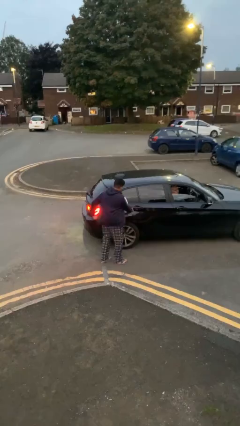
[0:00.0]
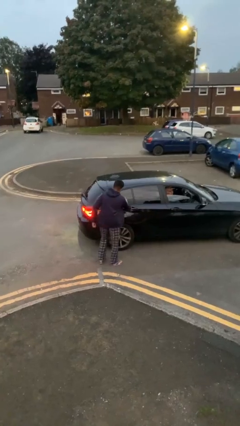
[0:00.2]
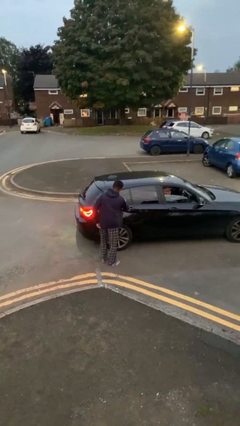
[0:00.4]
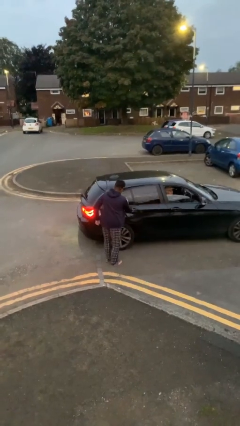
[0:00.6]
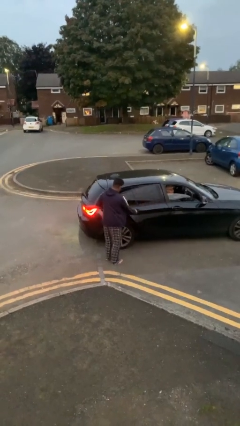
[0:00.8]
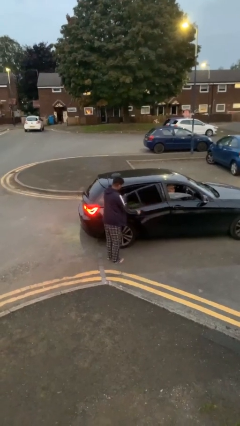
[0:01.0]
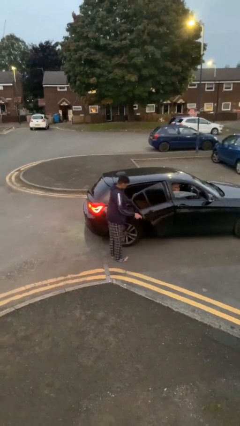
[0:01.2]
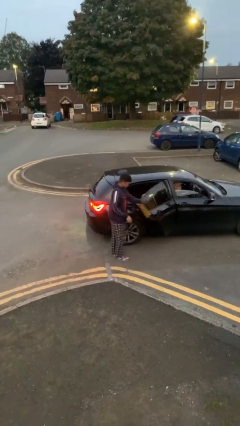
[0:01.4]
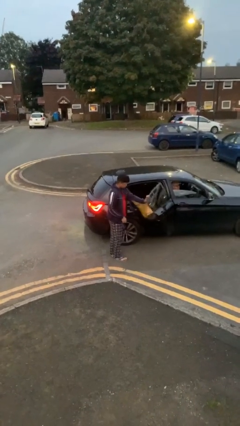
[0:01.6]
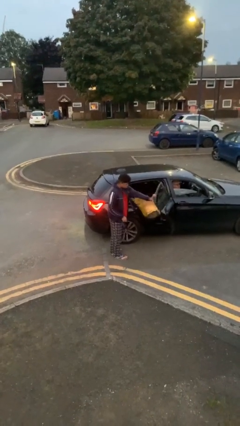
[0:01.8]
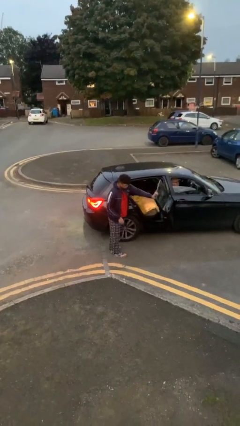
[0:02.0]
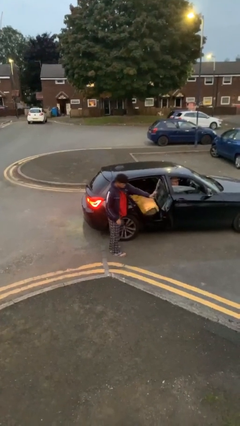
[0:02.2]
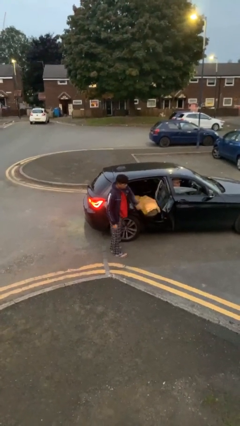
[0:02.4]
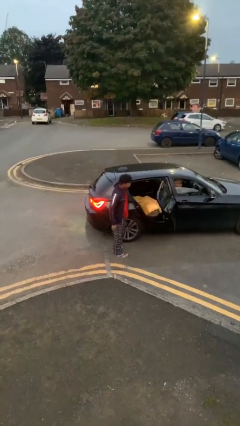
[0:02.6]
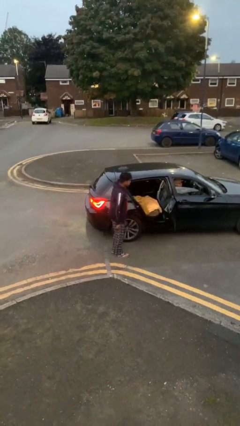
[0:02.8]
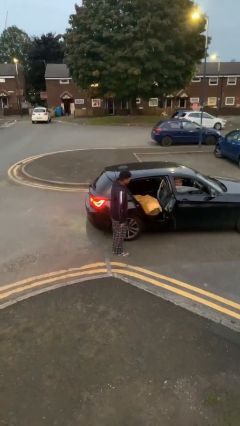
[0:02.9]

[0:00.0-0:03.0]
person opens car door

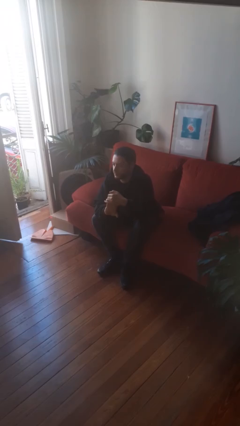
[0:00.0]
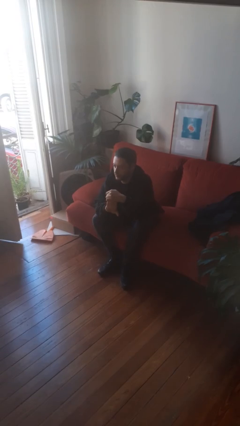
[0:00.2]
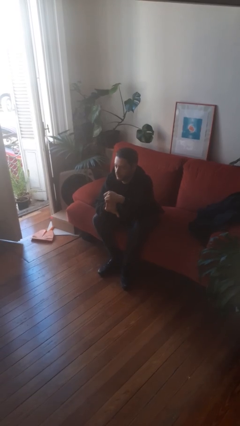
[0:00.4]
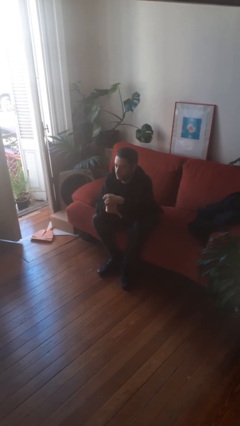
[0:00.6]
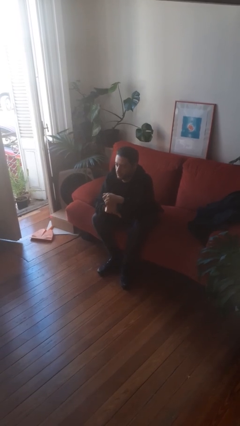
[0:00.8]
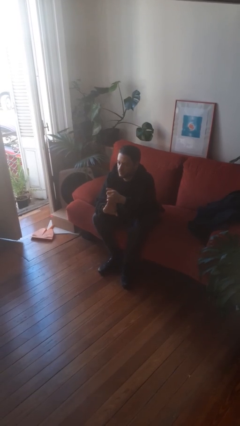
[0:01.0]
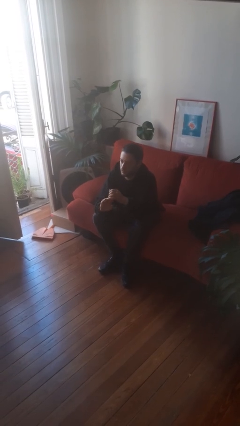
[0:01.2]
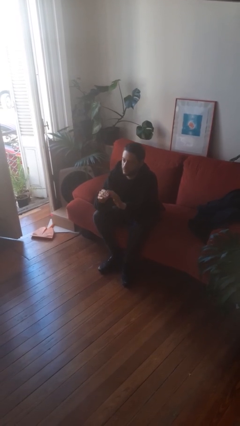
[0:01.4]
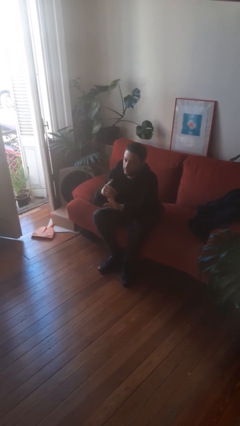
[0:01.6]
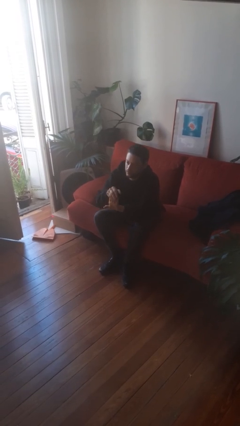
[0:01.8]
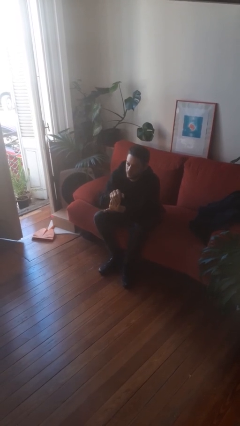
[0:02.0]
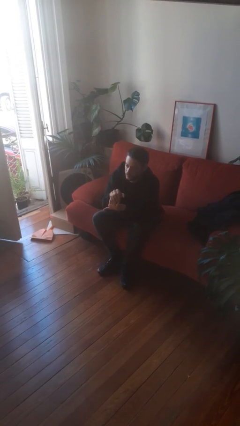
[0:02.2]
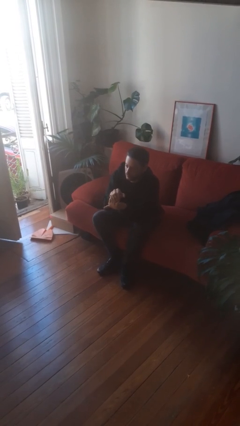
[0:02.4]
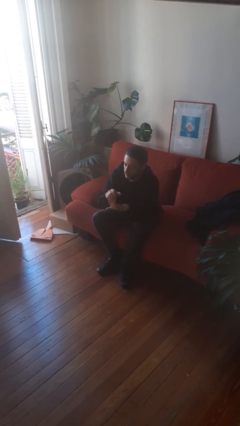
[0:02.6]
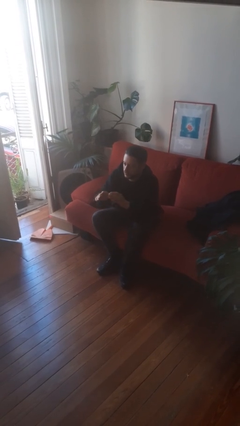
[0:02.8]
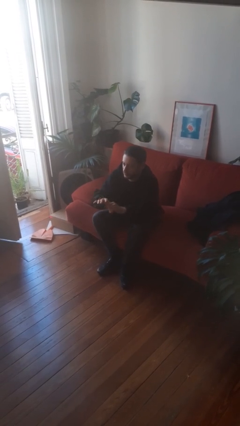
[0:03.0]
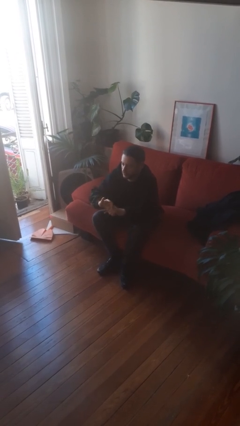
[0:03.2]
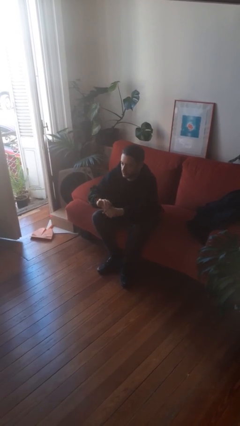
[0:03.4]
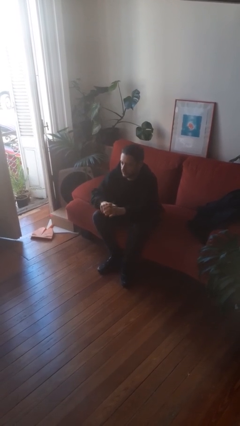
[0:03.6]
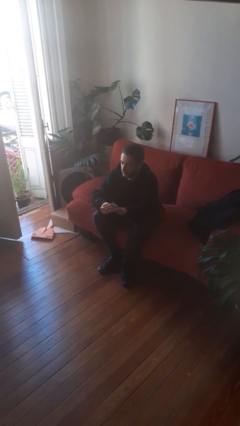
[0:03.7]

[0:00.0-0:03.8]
person cracks knuckles

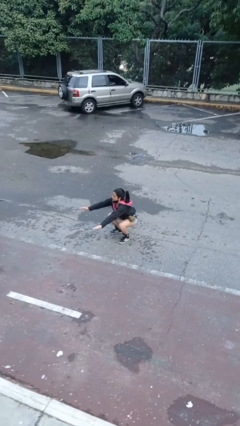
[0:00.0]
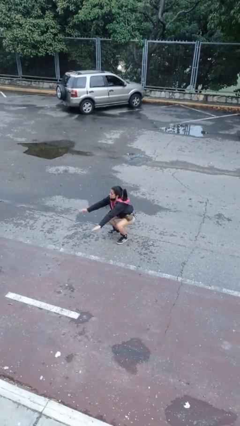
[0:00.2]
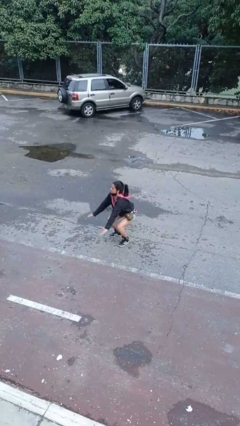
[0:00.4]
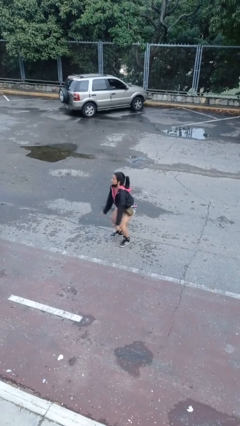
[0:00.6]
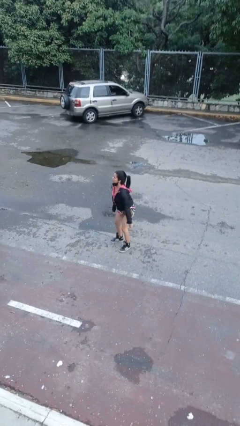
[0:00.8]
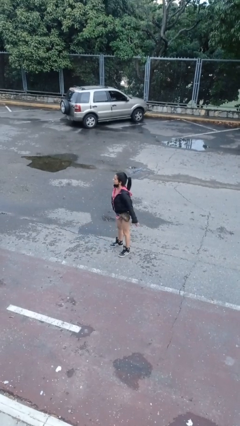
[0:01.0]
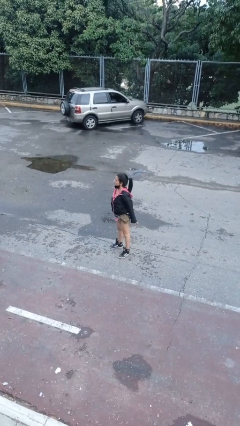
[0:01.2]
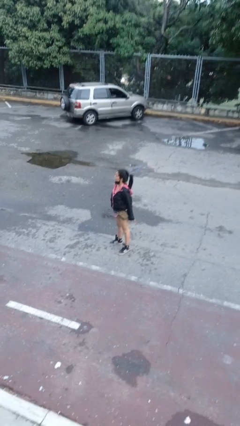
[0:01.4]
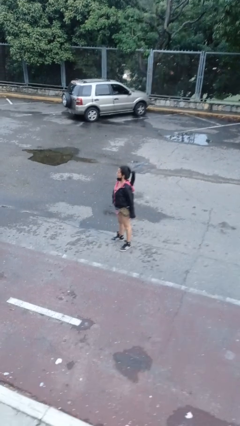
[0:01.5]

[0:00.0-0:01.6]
person stands up

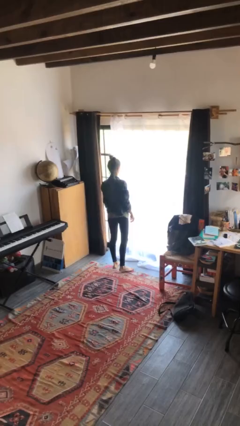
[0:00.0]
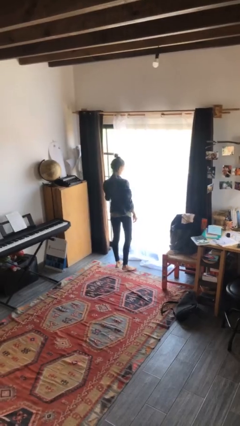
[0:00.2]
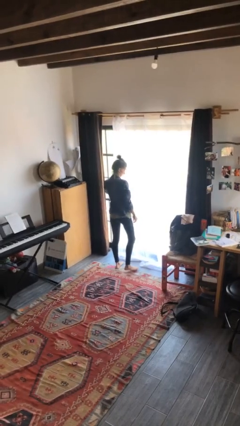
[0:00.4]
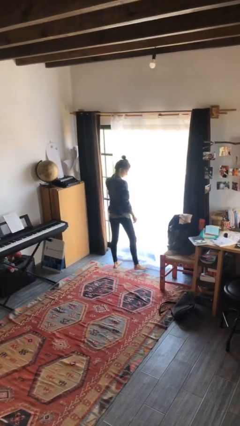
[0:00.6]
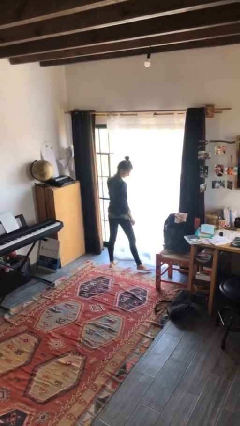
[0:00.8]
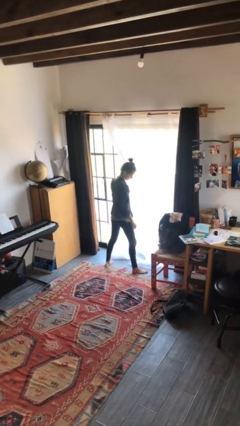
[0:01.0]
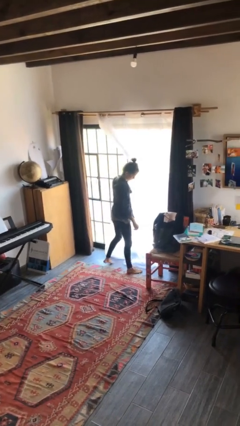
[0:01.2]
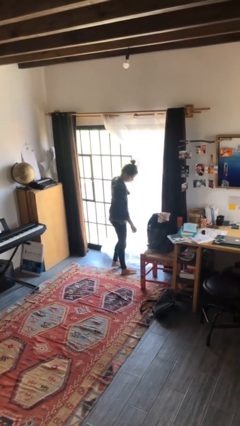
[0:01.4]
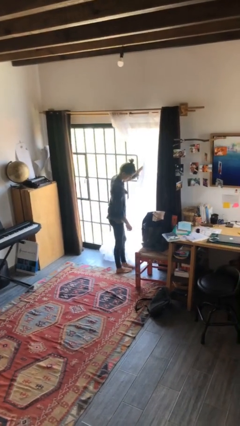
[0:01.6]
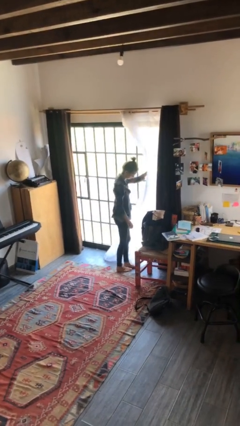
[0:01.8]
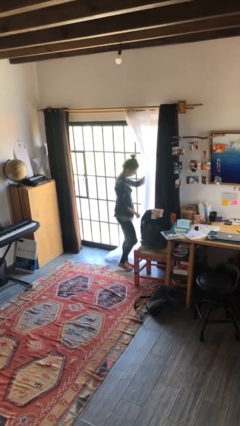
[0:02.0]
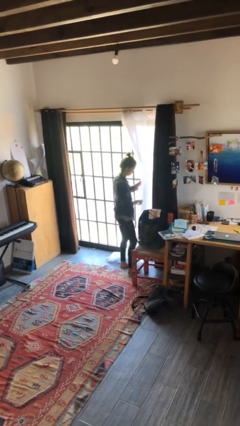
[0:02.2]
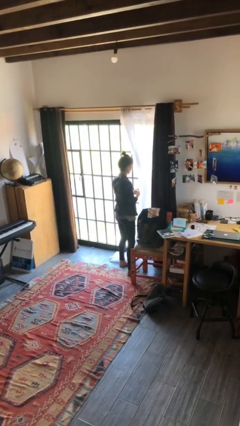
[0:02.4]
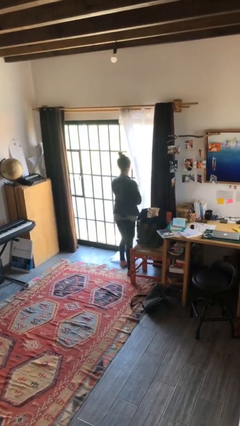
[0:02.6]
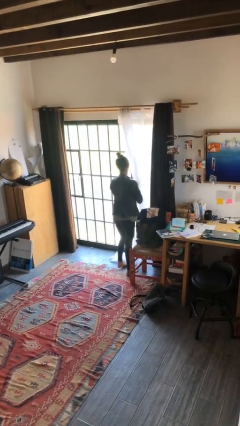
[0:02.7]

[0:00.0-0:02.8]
person opens curtains

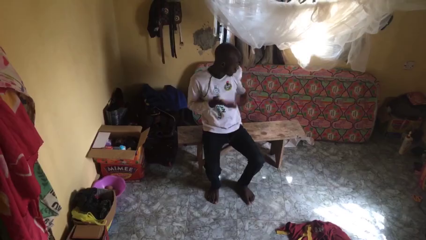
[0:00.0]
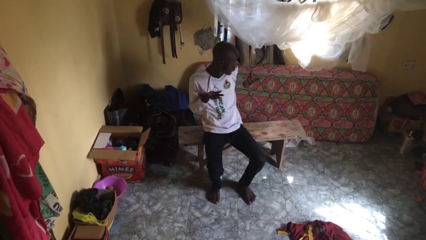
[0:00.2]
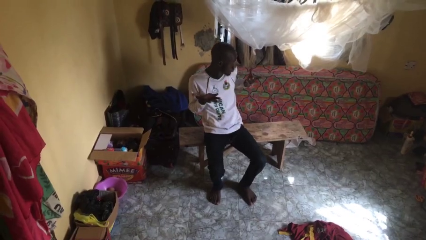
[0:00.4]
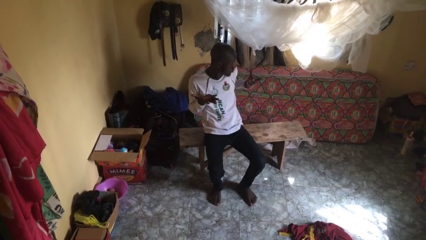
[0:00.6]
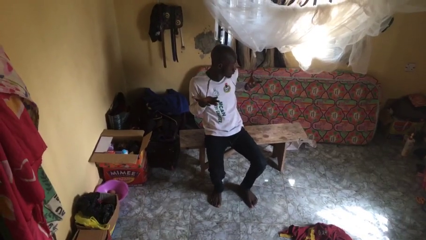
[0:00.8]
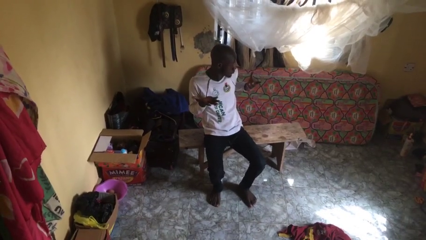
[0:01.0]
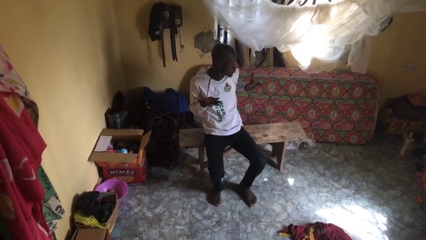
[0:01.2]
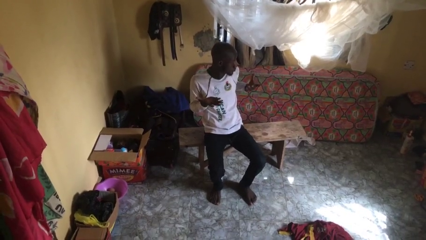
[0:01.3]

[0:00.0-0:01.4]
person shrugs

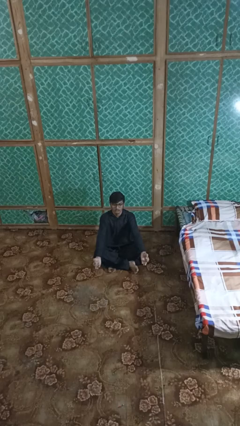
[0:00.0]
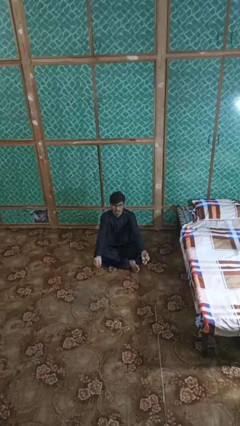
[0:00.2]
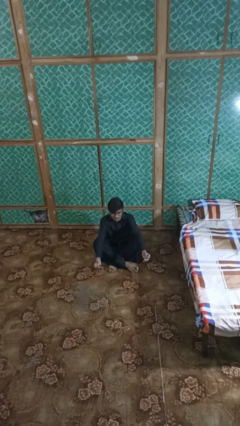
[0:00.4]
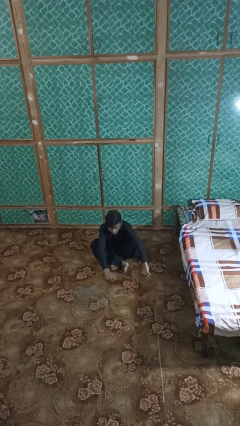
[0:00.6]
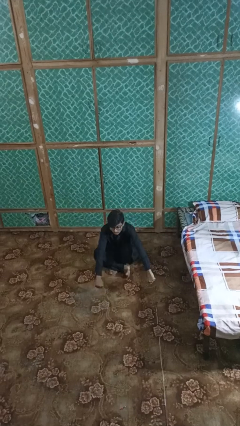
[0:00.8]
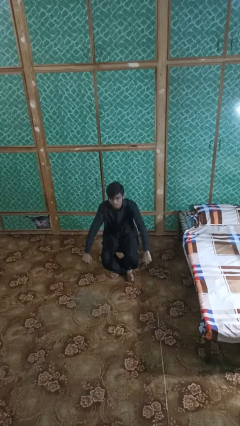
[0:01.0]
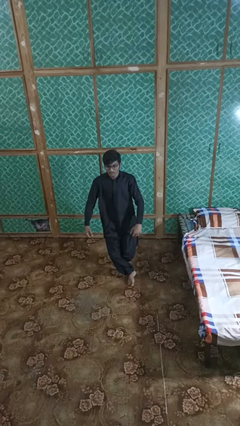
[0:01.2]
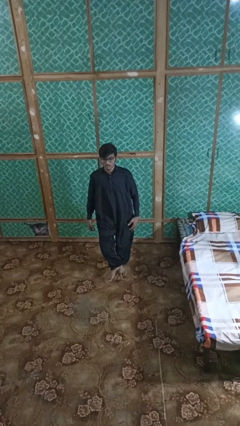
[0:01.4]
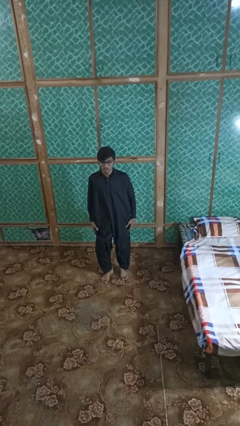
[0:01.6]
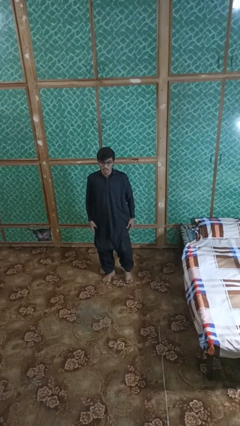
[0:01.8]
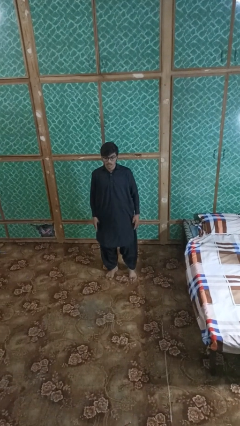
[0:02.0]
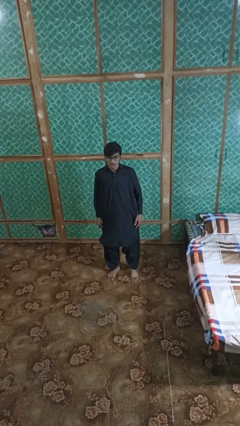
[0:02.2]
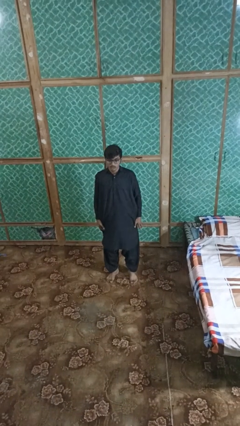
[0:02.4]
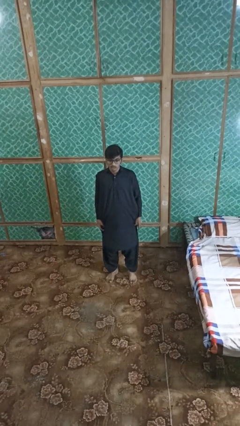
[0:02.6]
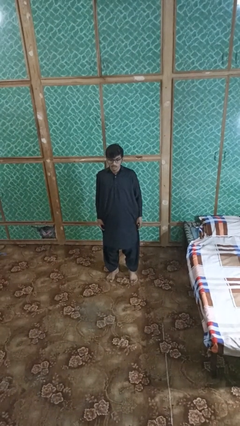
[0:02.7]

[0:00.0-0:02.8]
person stands up from floor

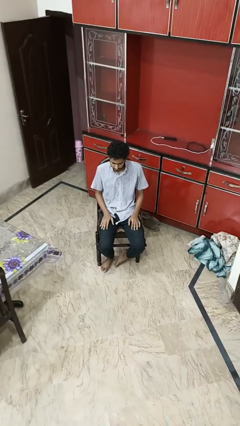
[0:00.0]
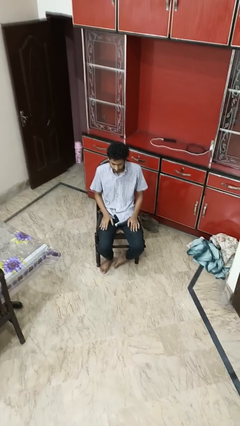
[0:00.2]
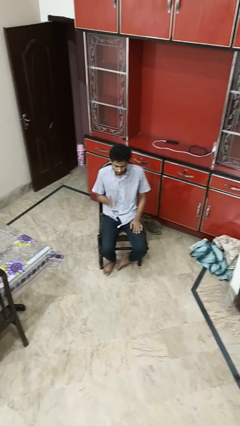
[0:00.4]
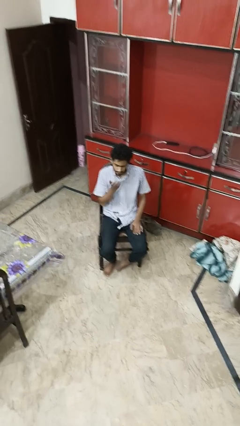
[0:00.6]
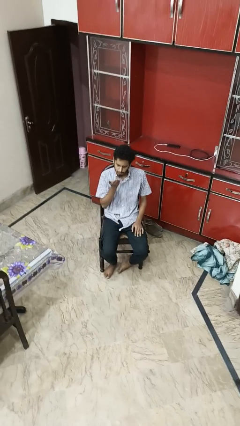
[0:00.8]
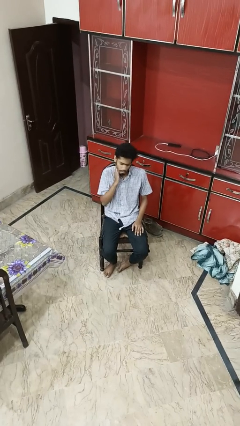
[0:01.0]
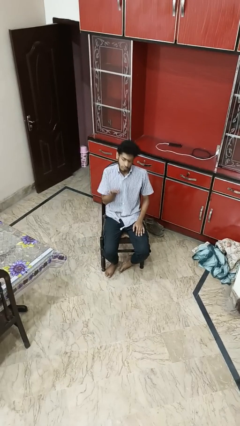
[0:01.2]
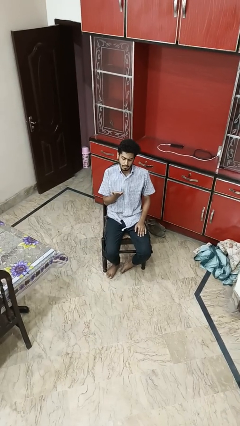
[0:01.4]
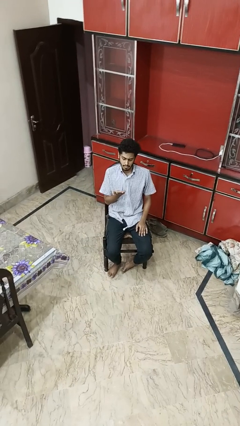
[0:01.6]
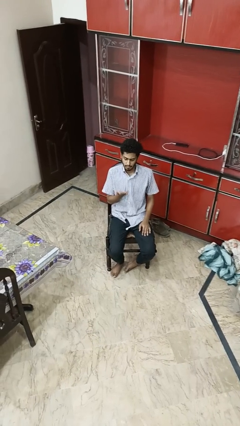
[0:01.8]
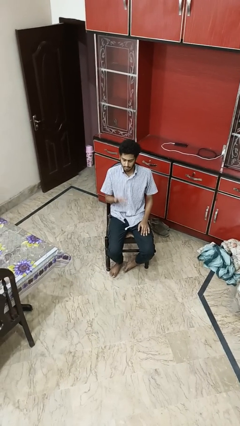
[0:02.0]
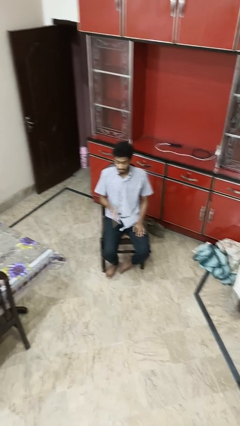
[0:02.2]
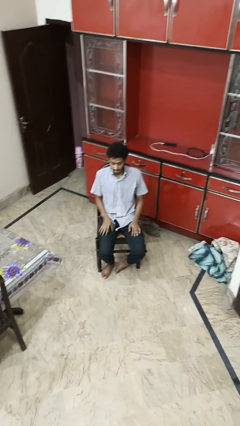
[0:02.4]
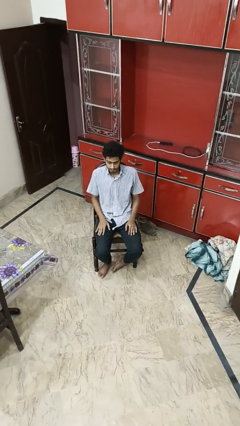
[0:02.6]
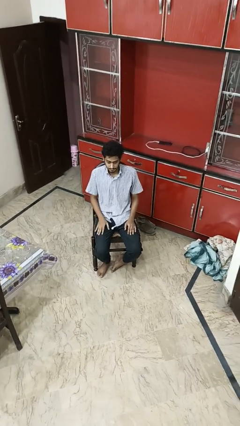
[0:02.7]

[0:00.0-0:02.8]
person swats bug
